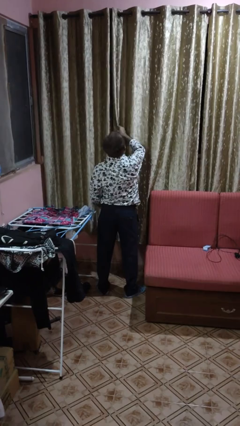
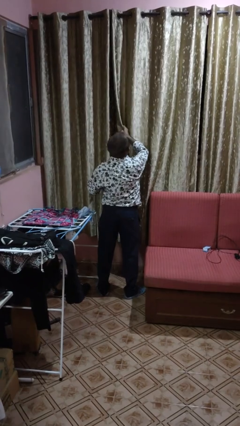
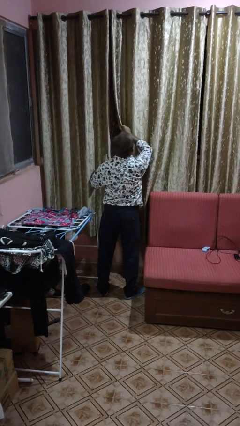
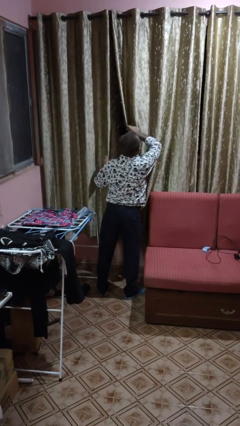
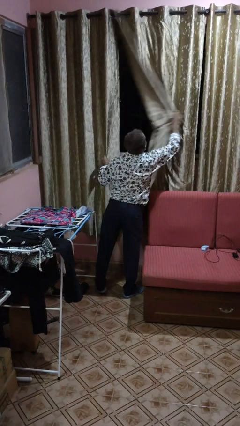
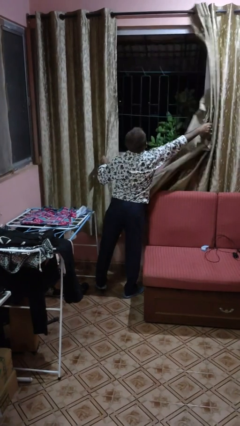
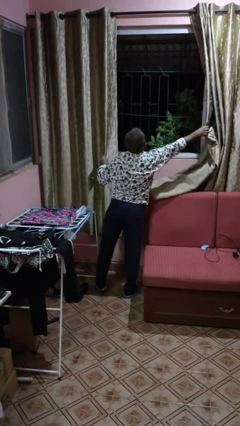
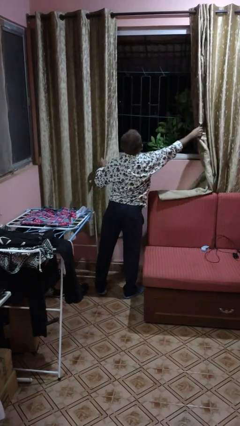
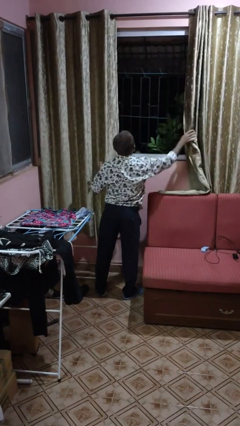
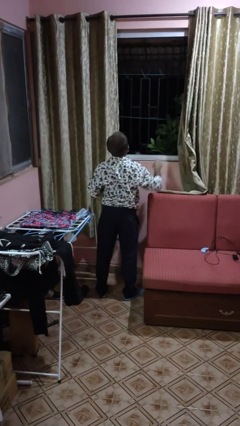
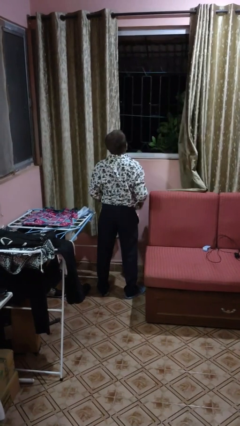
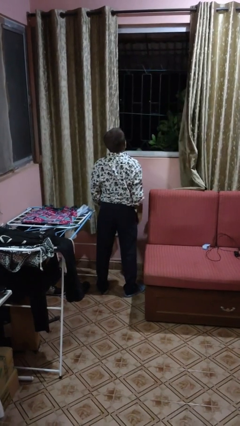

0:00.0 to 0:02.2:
person opens curtains

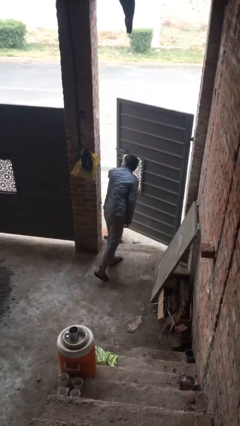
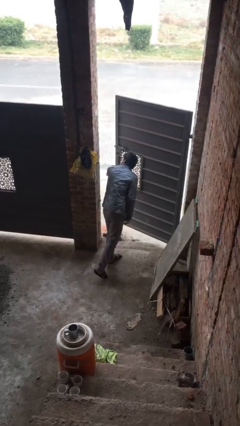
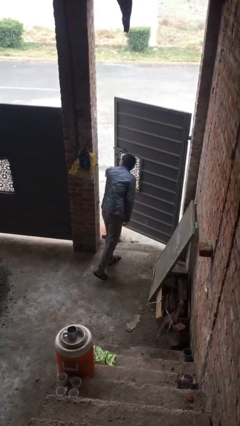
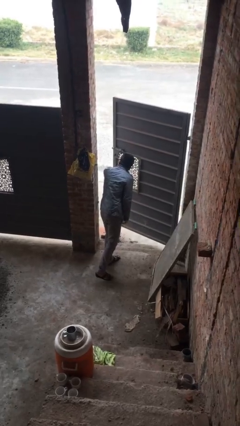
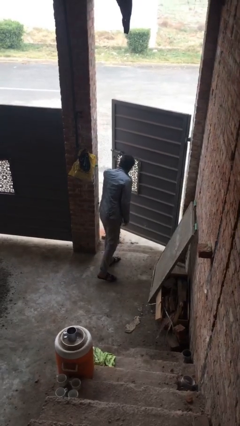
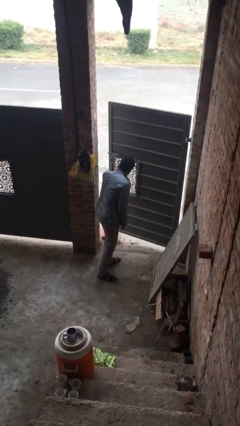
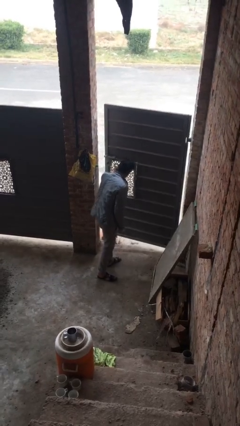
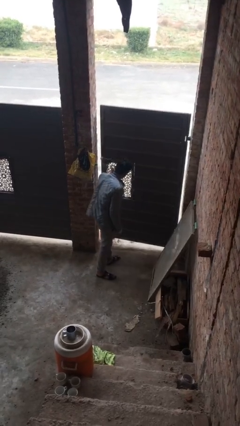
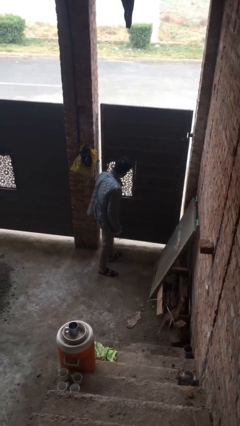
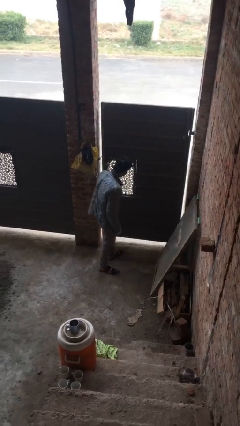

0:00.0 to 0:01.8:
person closes facility door

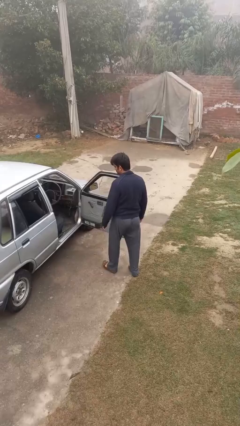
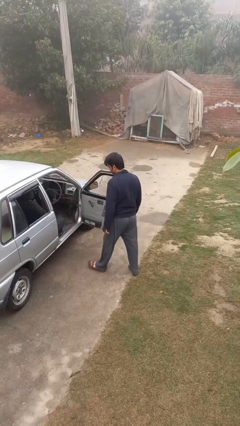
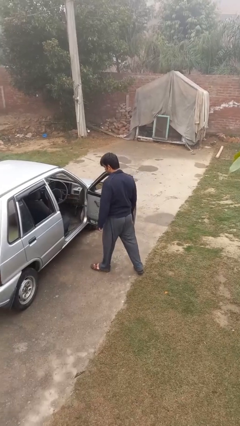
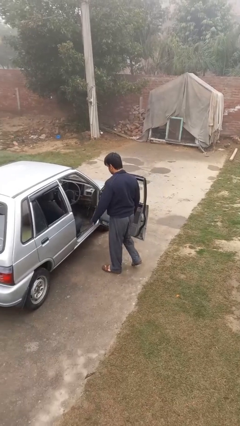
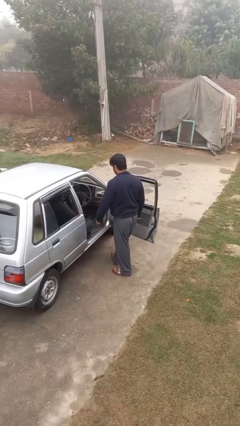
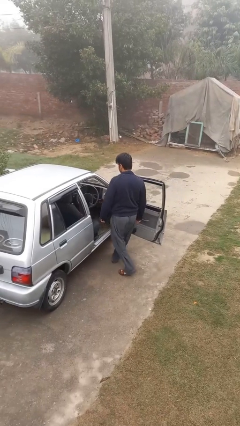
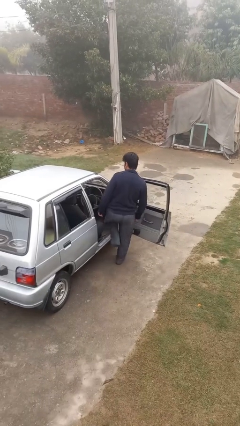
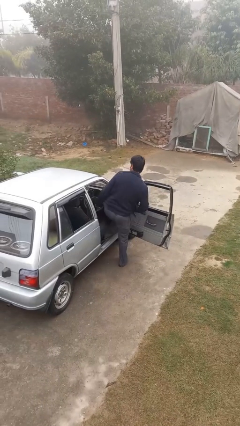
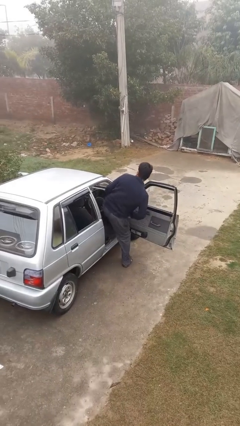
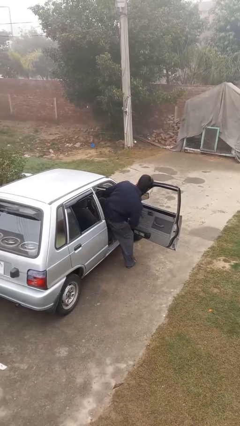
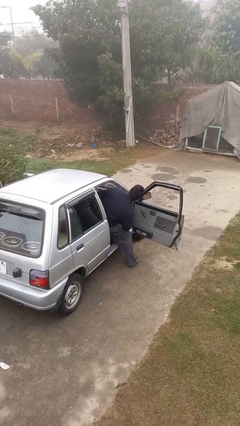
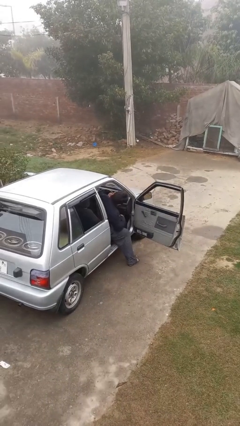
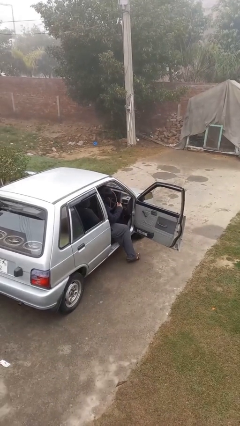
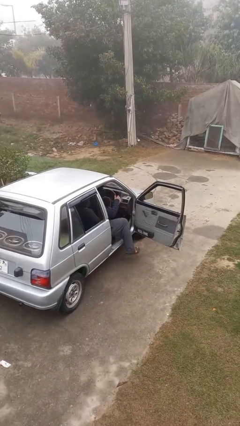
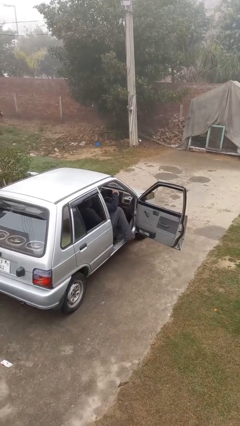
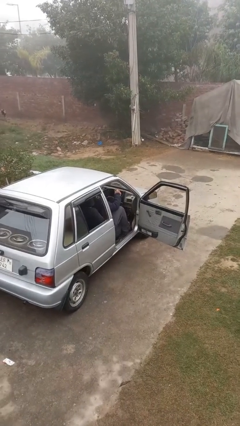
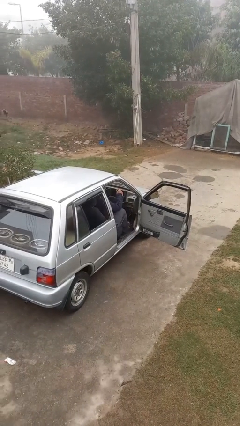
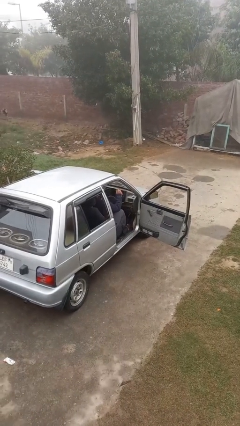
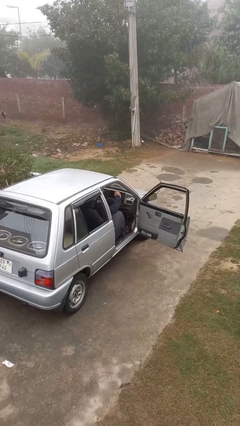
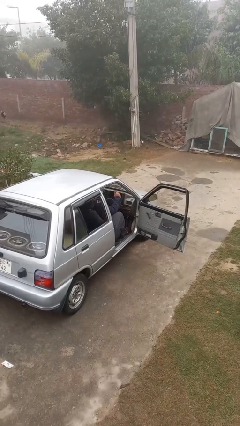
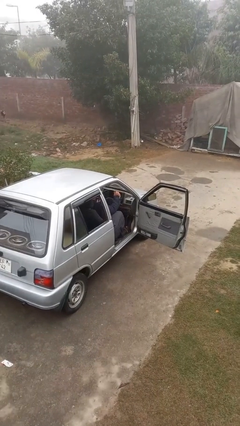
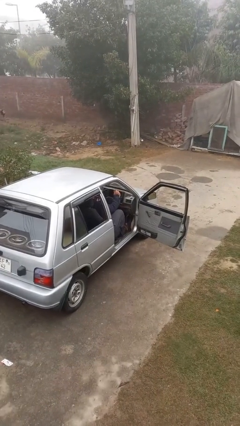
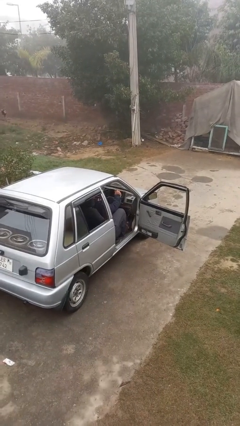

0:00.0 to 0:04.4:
person enters car

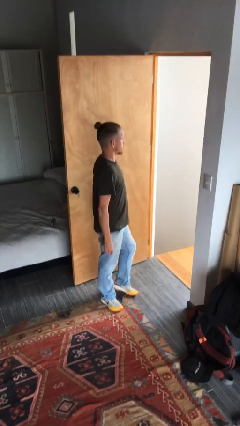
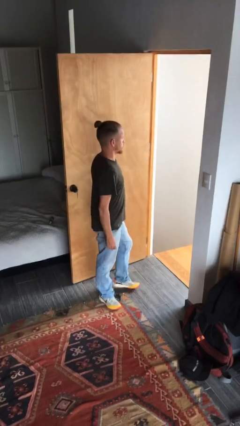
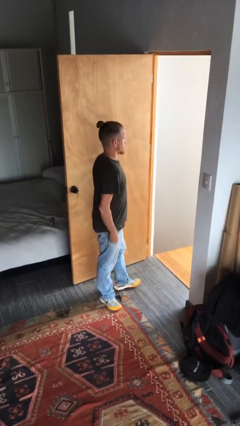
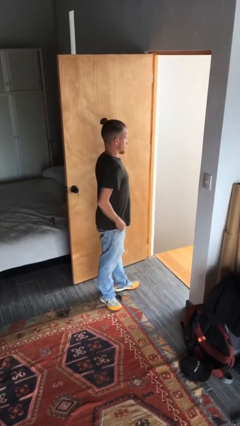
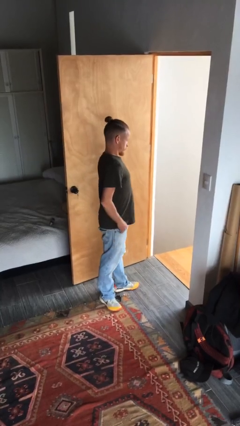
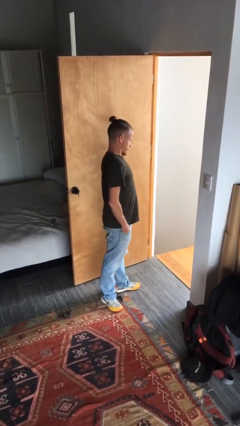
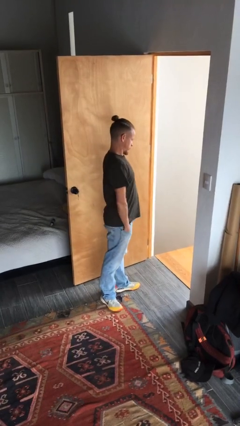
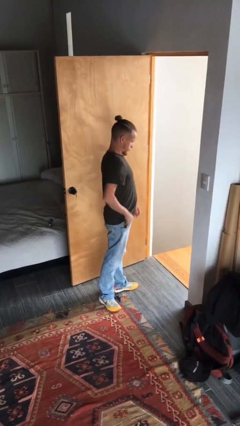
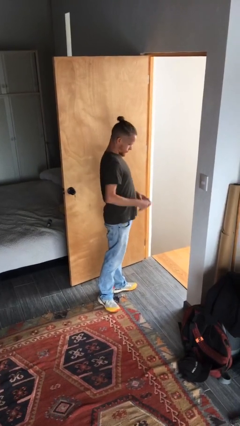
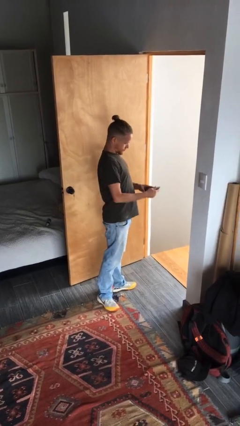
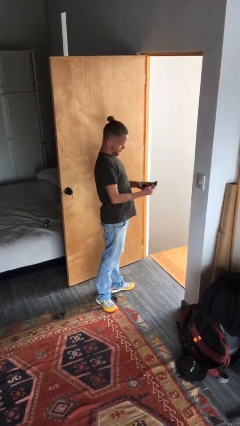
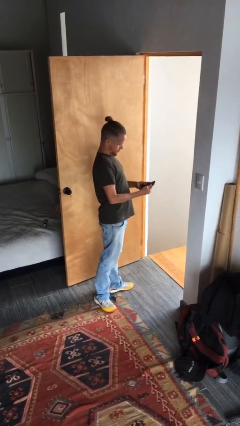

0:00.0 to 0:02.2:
person takes phone from pocket

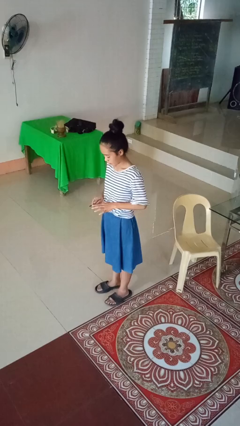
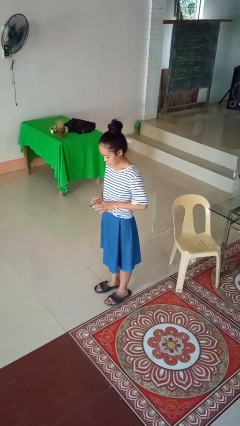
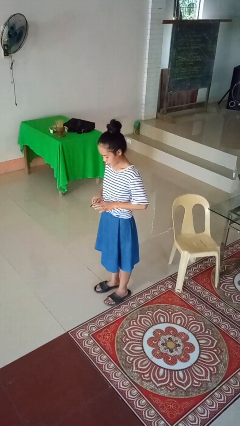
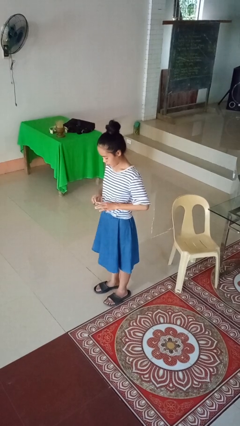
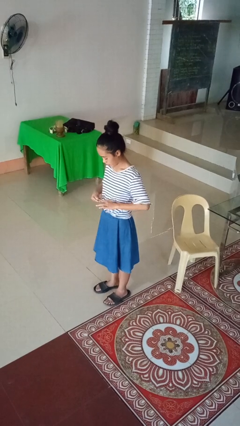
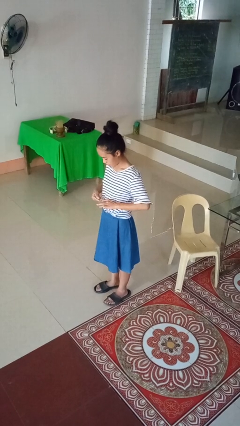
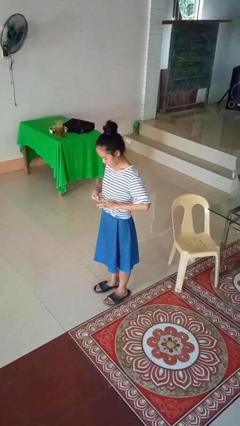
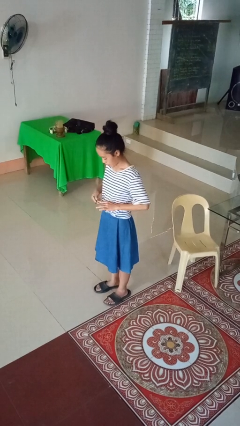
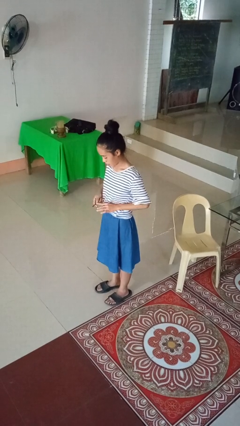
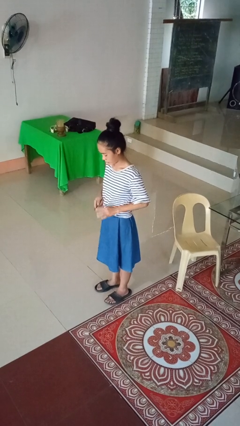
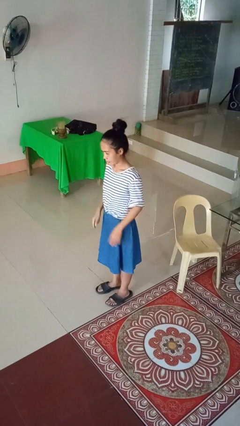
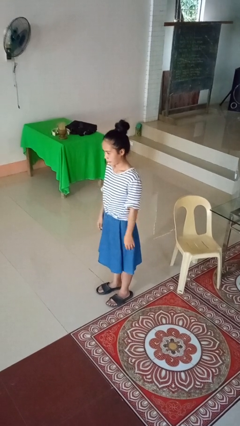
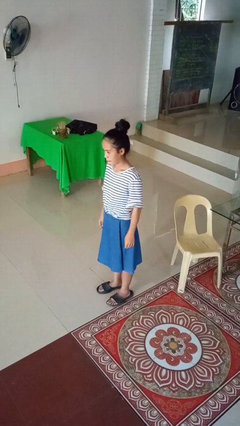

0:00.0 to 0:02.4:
person files fingernails

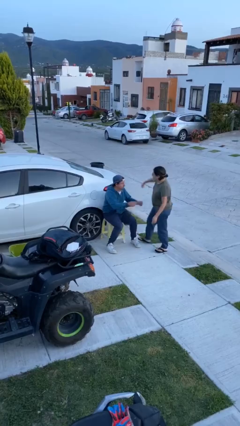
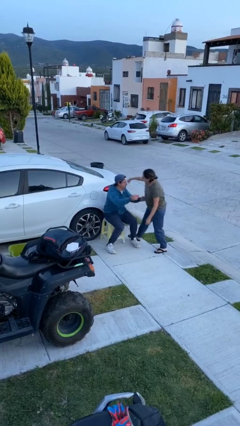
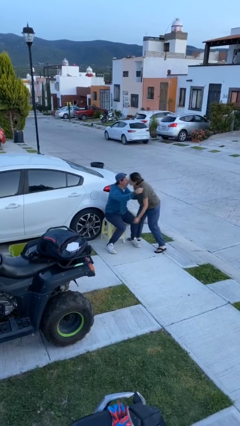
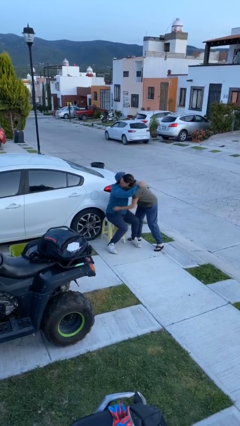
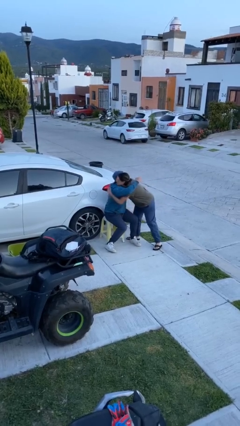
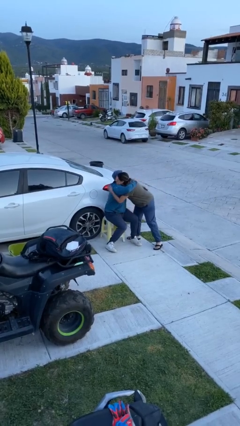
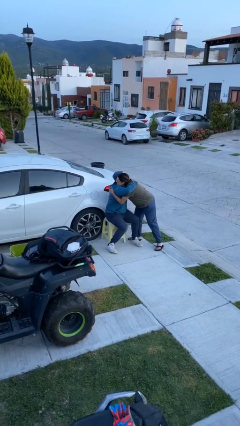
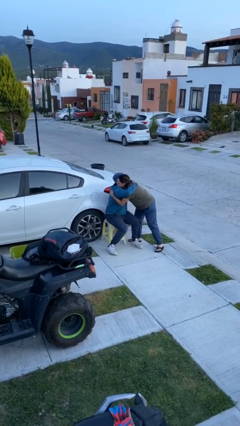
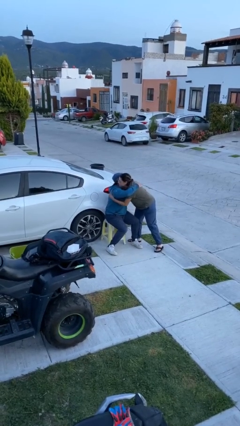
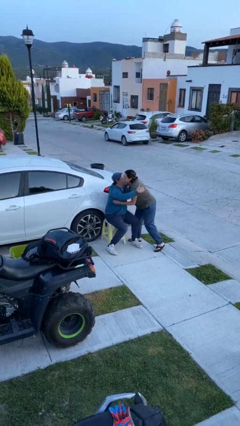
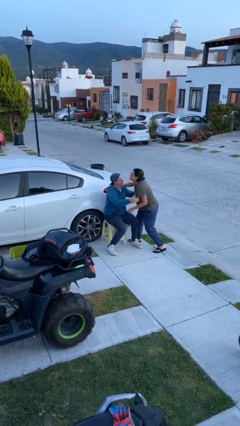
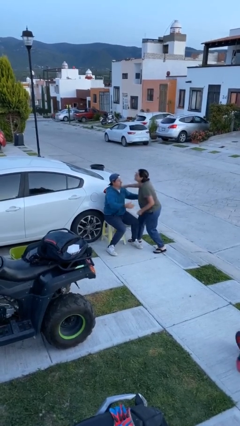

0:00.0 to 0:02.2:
person embraces person

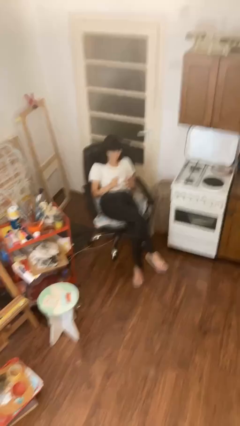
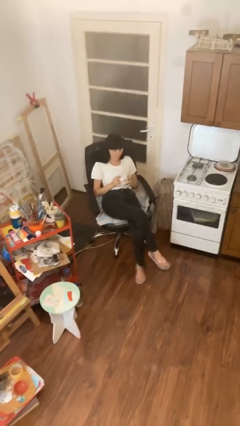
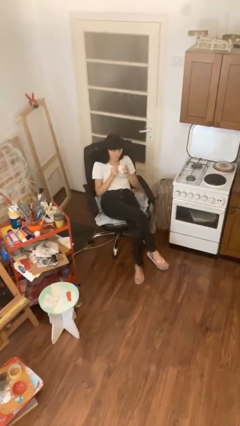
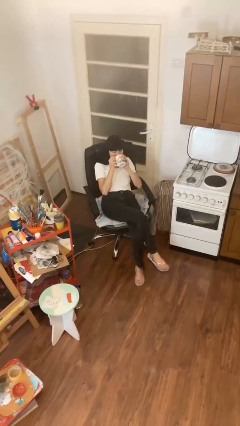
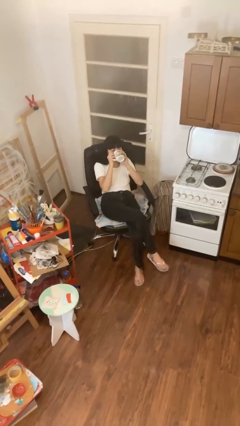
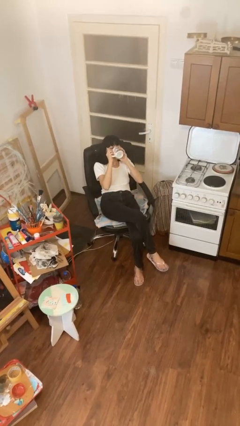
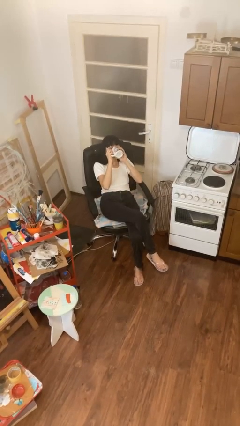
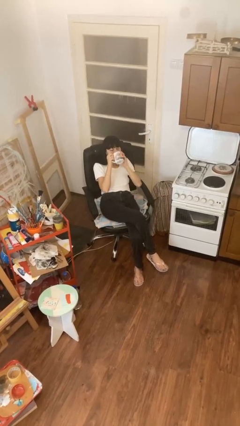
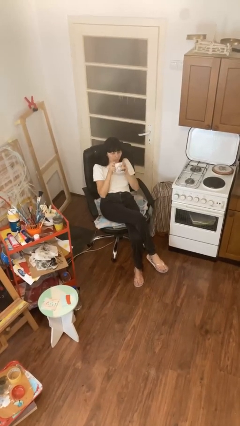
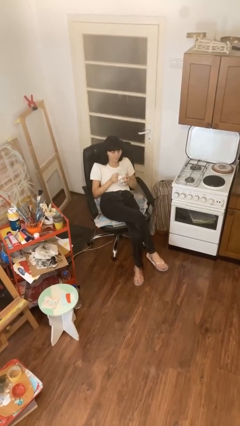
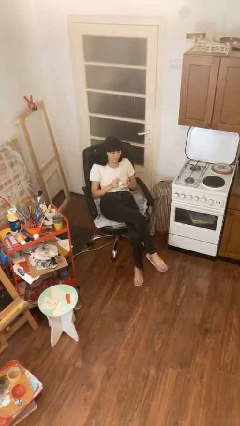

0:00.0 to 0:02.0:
person drinks from mug
